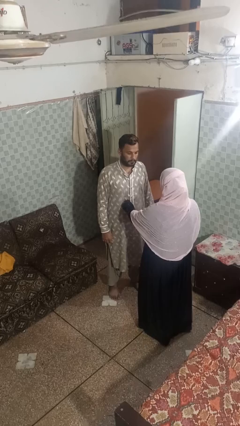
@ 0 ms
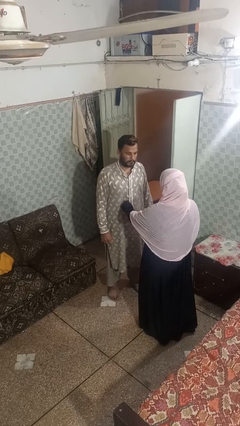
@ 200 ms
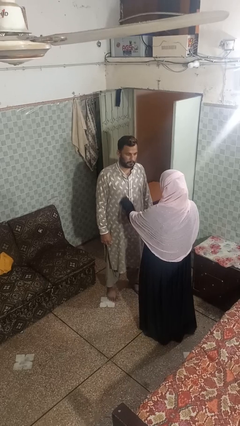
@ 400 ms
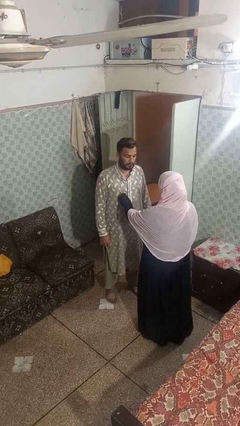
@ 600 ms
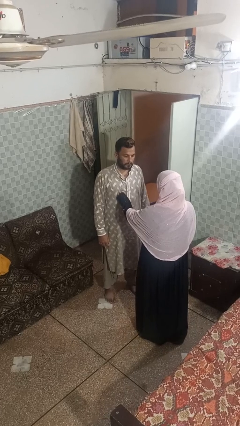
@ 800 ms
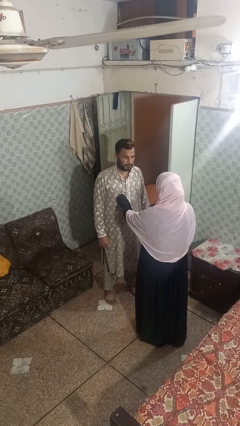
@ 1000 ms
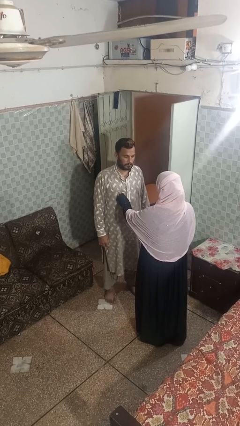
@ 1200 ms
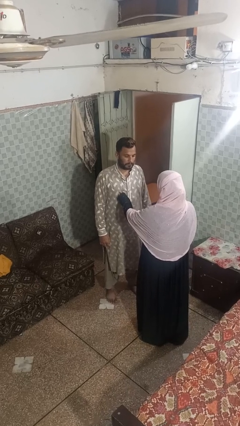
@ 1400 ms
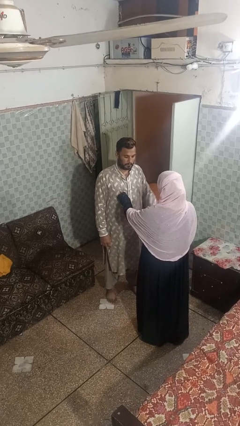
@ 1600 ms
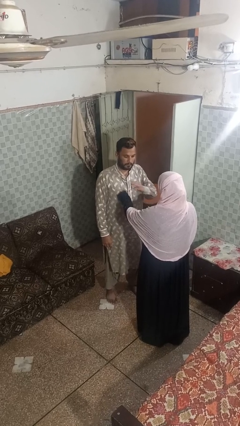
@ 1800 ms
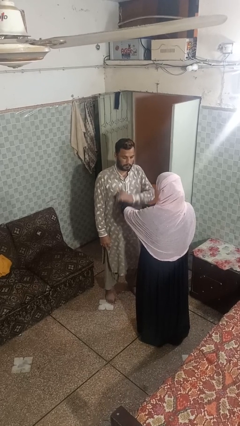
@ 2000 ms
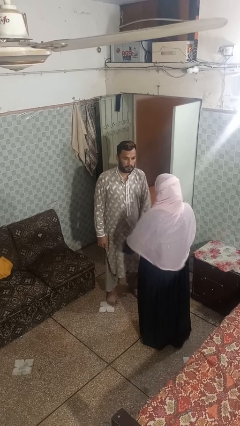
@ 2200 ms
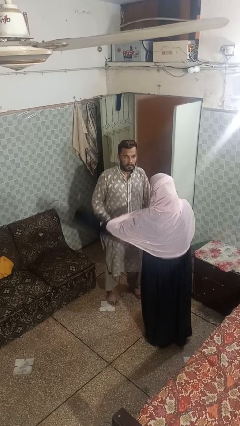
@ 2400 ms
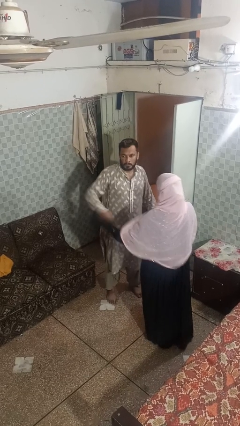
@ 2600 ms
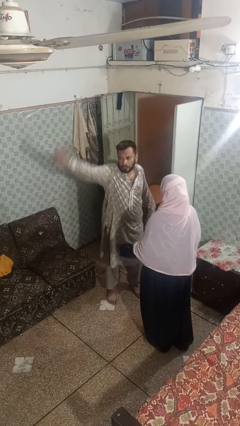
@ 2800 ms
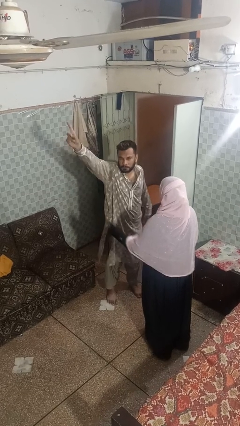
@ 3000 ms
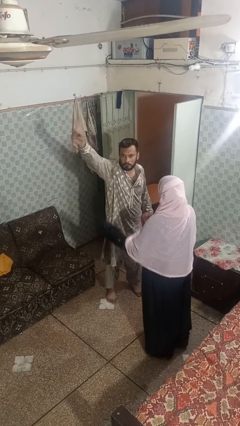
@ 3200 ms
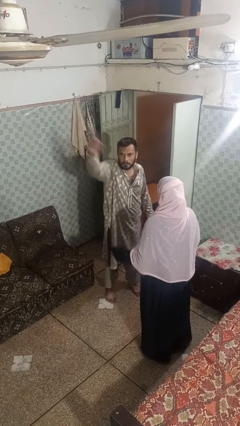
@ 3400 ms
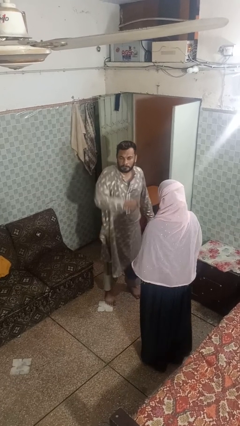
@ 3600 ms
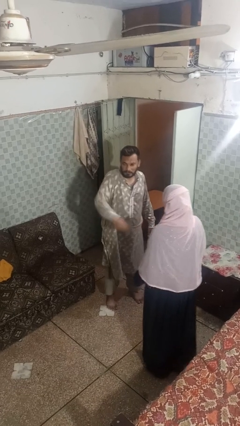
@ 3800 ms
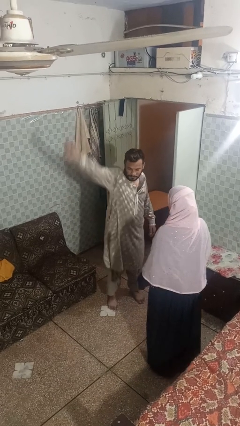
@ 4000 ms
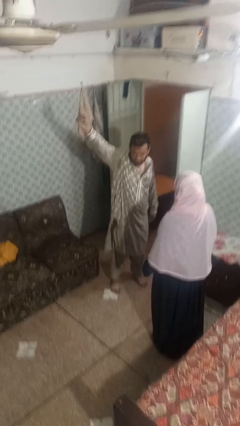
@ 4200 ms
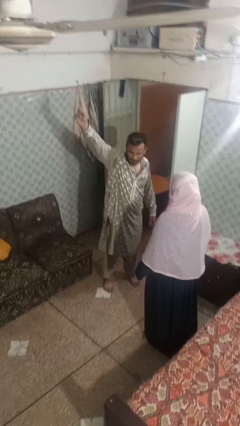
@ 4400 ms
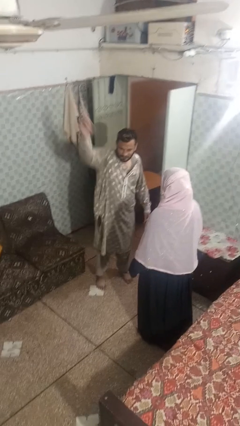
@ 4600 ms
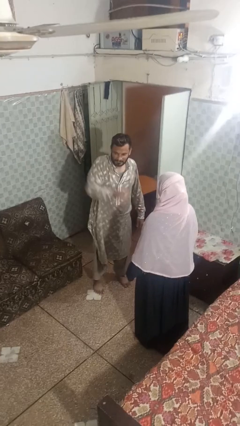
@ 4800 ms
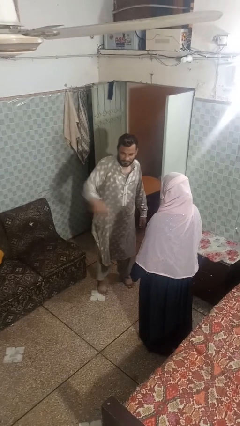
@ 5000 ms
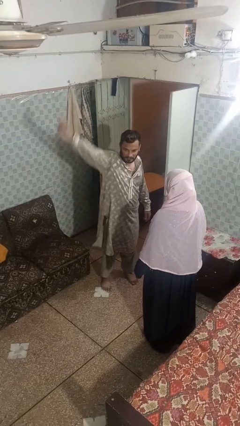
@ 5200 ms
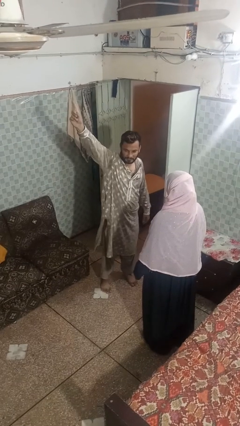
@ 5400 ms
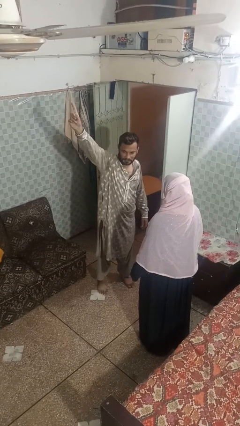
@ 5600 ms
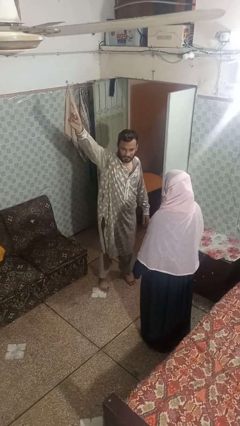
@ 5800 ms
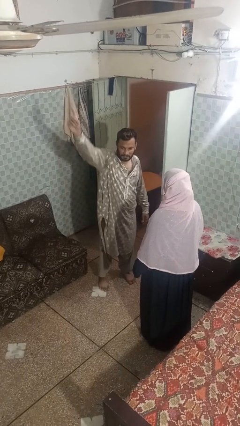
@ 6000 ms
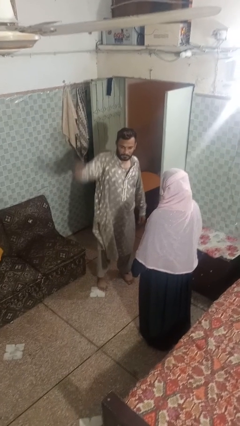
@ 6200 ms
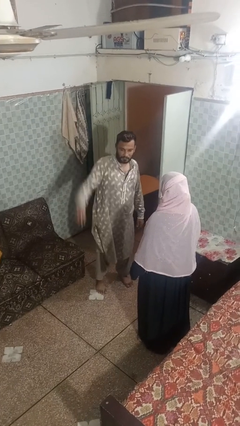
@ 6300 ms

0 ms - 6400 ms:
person shoves person

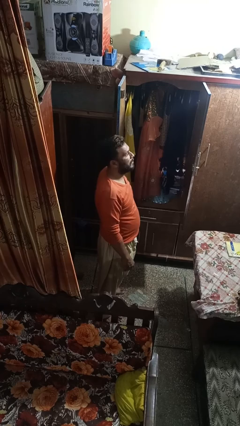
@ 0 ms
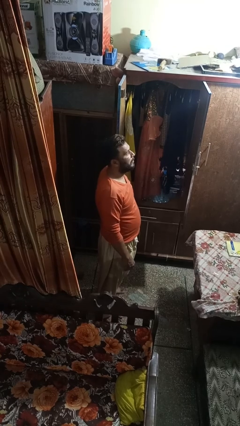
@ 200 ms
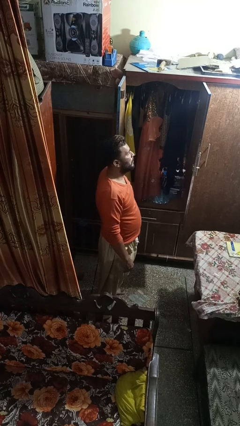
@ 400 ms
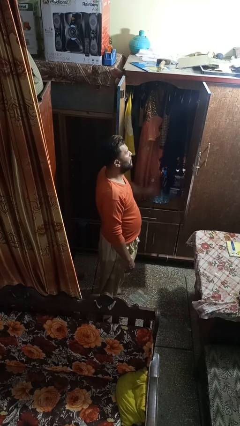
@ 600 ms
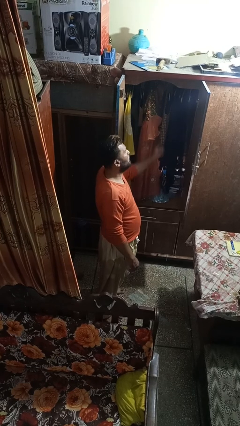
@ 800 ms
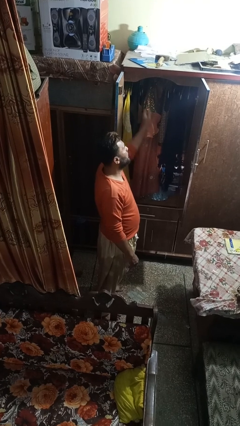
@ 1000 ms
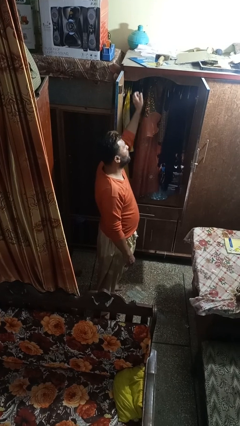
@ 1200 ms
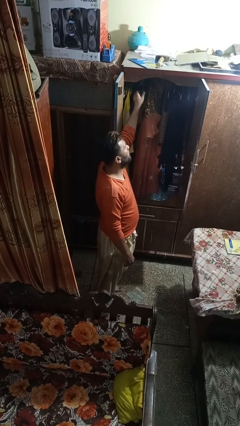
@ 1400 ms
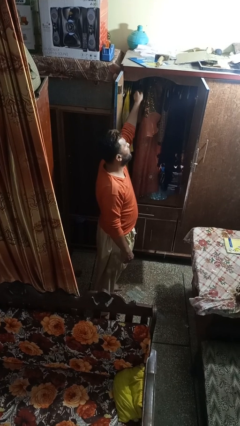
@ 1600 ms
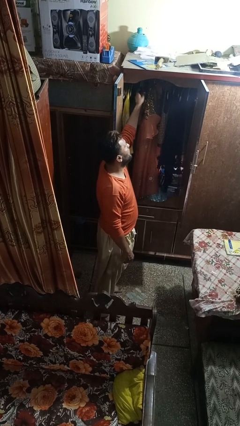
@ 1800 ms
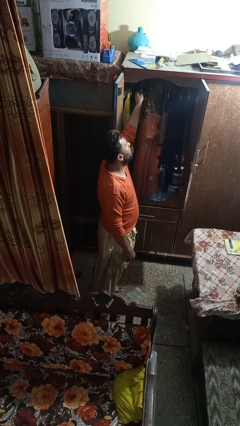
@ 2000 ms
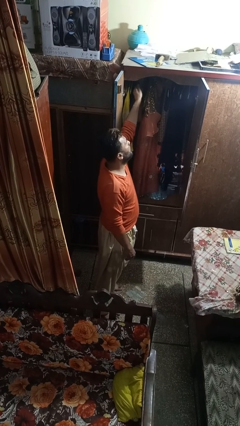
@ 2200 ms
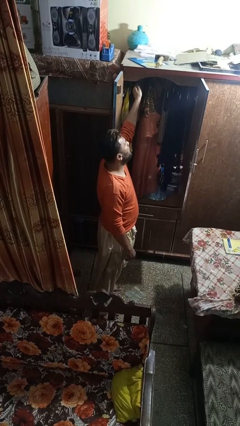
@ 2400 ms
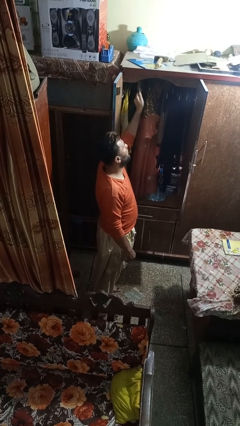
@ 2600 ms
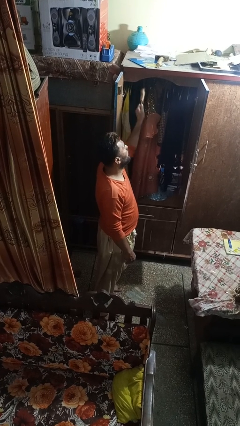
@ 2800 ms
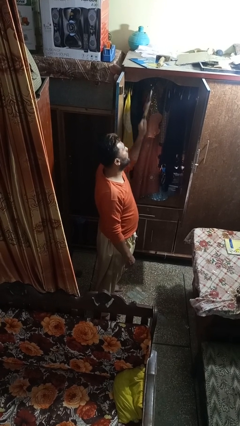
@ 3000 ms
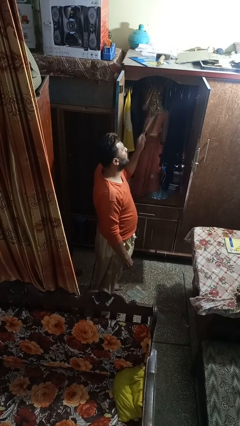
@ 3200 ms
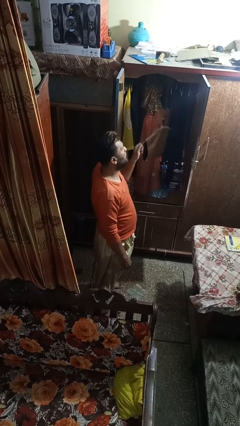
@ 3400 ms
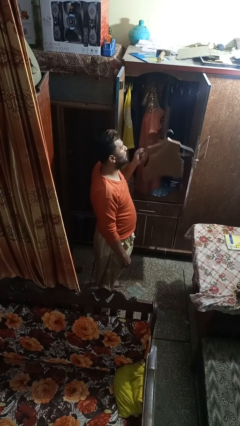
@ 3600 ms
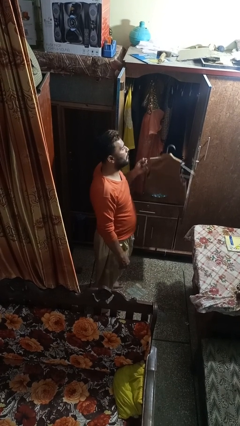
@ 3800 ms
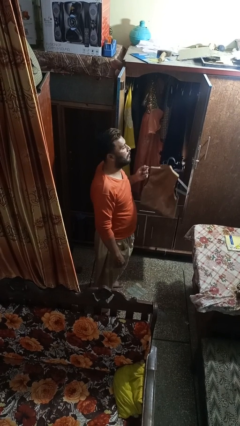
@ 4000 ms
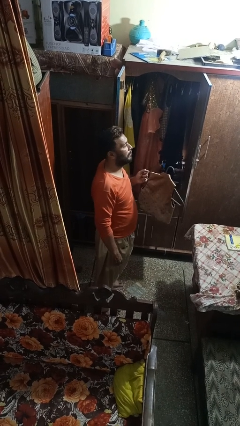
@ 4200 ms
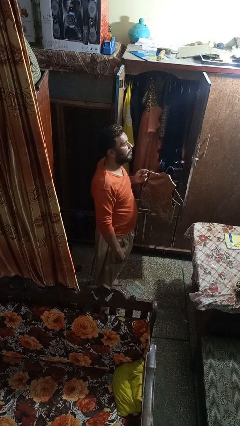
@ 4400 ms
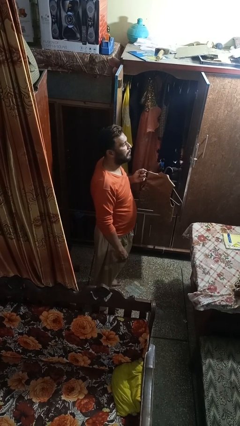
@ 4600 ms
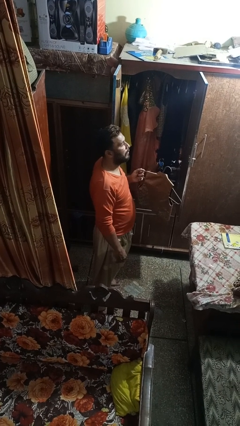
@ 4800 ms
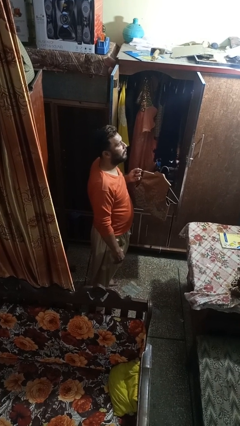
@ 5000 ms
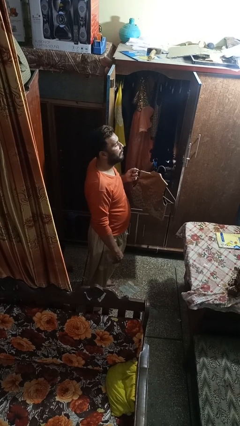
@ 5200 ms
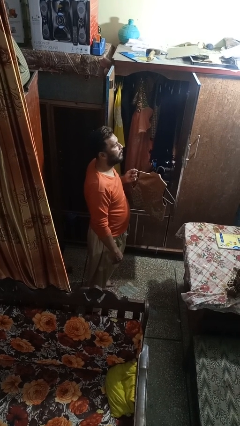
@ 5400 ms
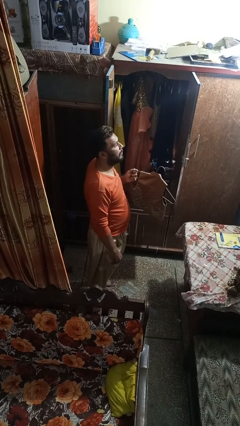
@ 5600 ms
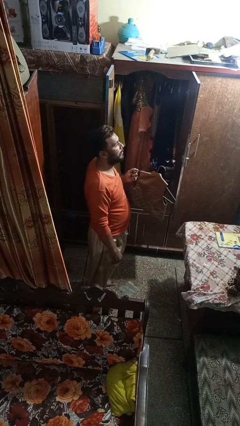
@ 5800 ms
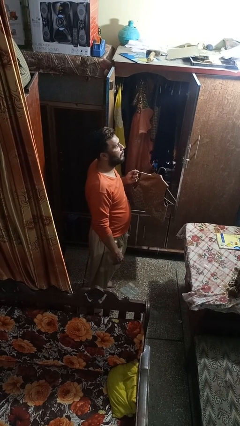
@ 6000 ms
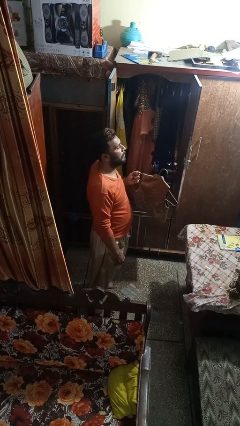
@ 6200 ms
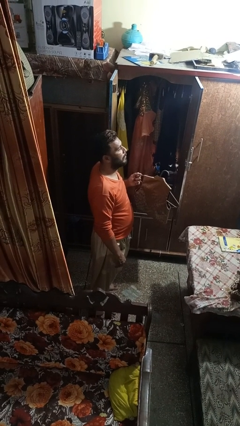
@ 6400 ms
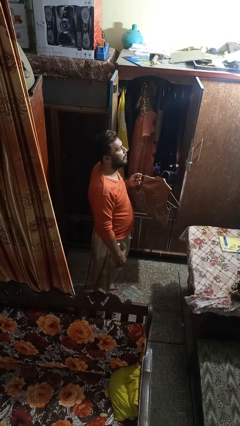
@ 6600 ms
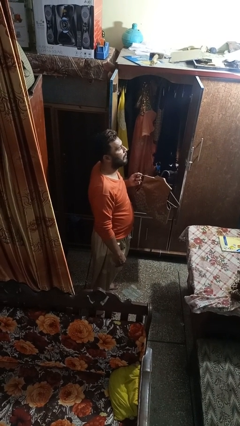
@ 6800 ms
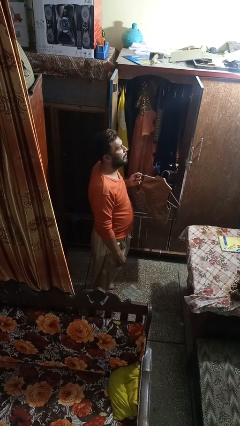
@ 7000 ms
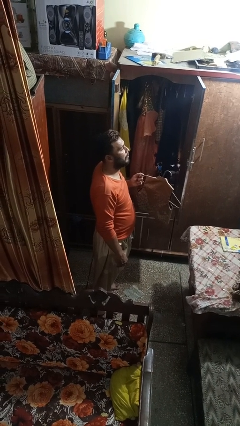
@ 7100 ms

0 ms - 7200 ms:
person takes clothes from closet

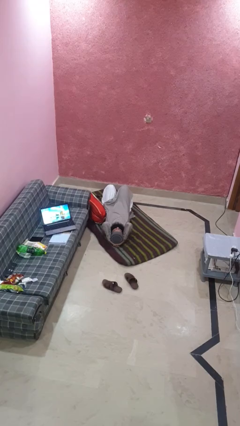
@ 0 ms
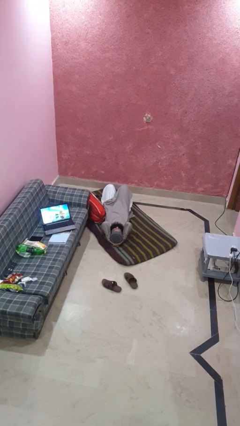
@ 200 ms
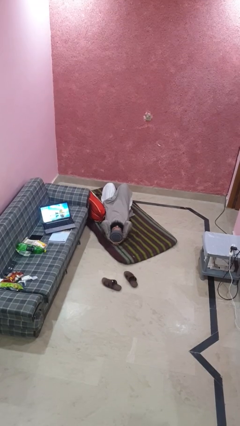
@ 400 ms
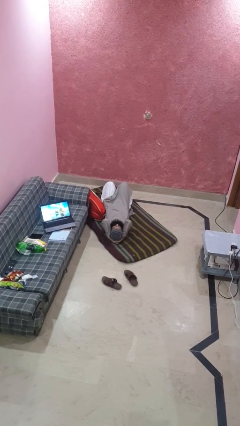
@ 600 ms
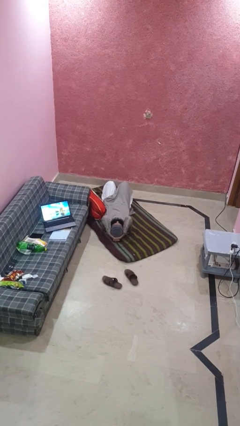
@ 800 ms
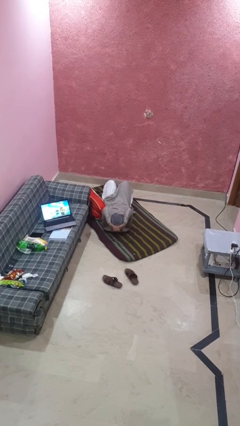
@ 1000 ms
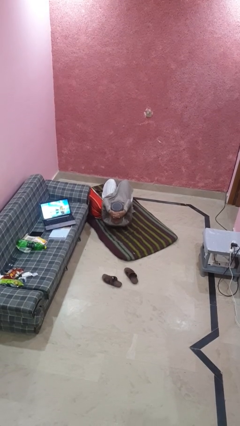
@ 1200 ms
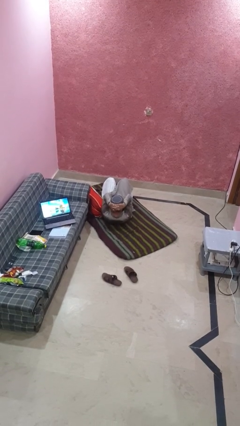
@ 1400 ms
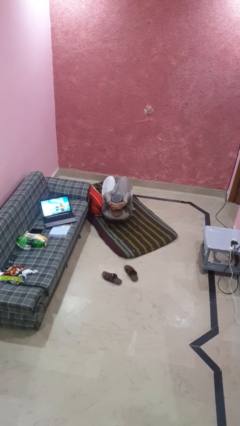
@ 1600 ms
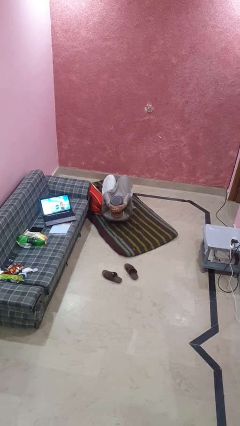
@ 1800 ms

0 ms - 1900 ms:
person exercises with situp

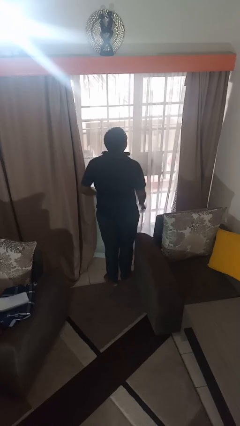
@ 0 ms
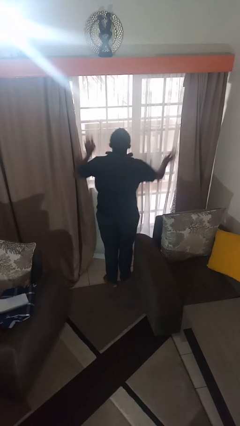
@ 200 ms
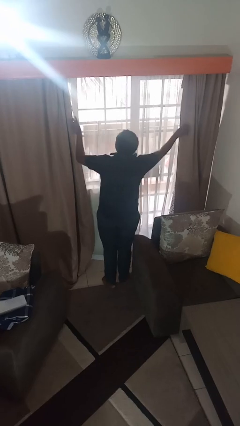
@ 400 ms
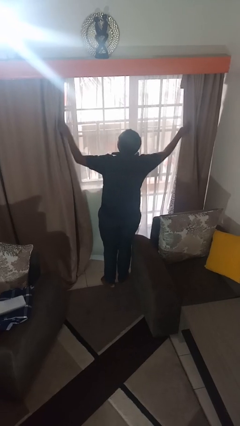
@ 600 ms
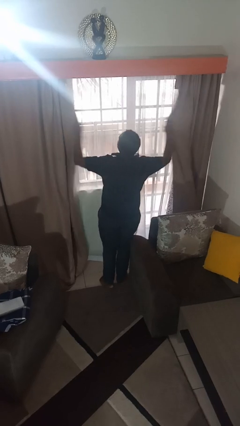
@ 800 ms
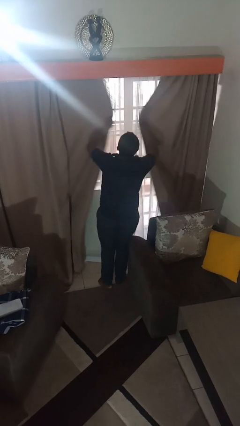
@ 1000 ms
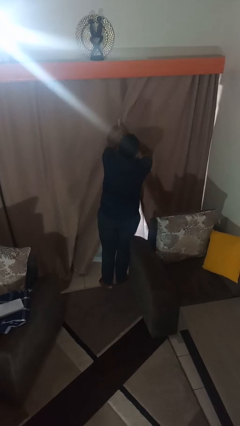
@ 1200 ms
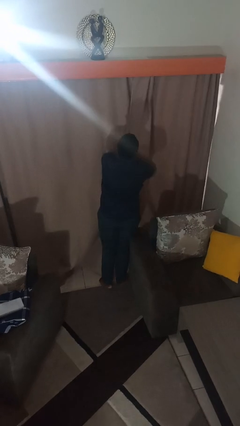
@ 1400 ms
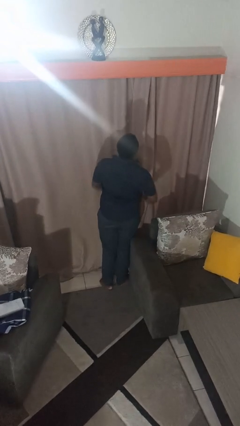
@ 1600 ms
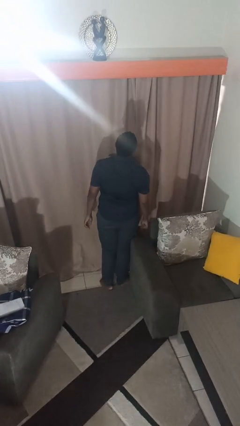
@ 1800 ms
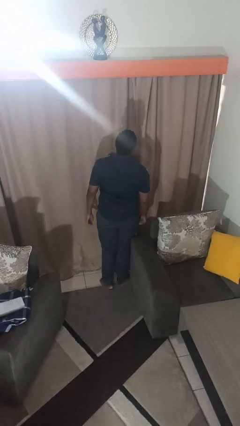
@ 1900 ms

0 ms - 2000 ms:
person closes curtains

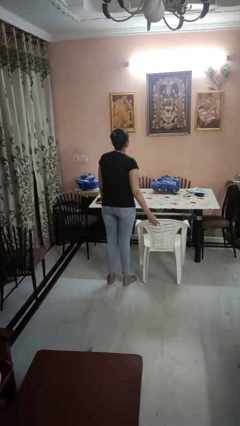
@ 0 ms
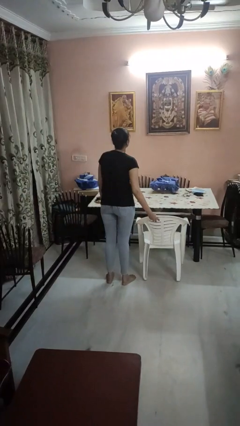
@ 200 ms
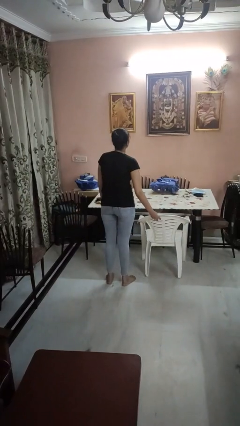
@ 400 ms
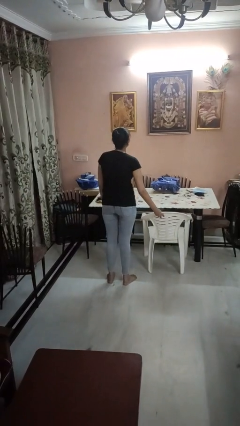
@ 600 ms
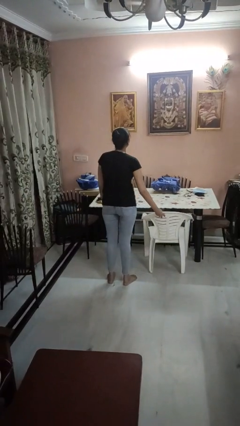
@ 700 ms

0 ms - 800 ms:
person pushes in chair
